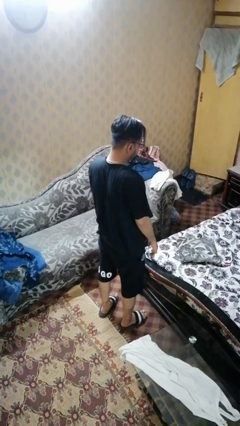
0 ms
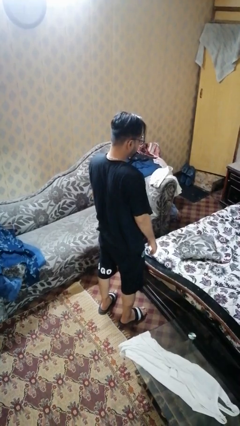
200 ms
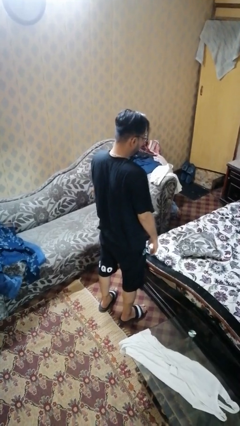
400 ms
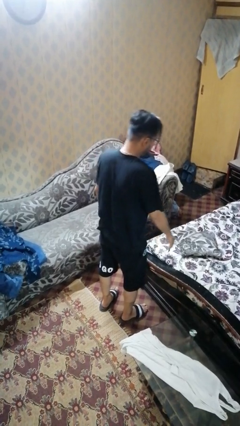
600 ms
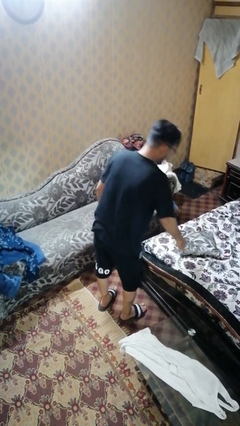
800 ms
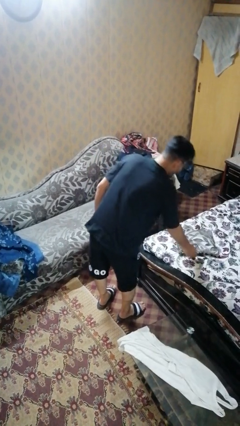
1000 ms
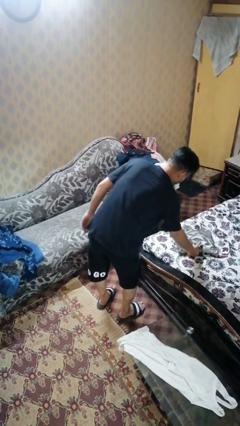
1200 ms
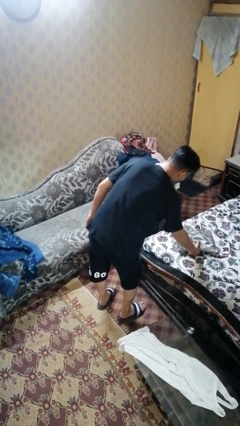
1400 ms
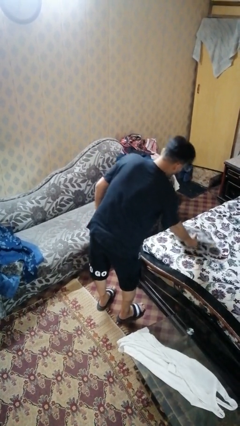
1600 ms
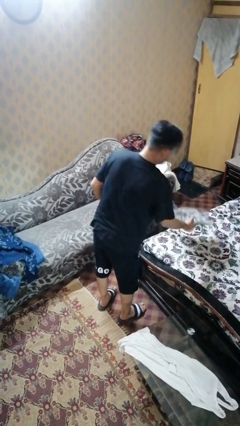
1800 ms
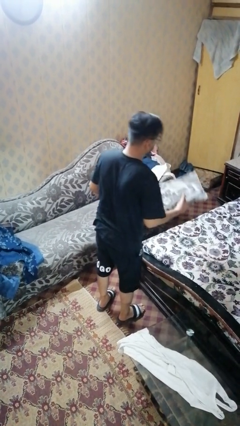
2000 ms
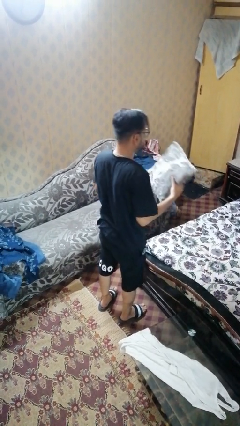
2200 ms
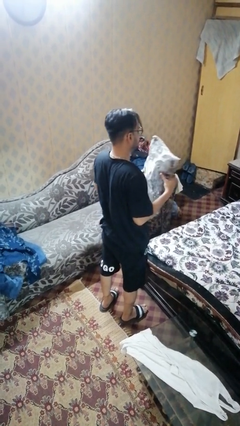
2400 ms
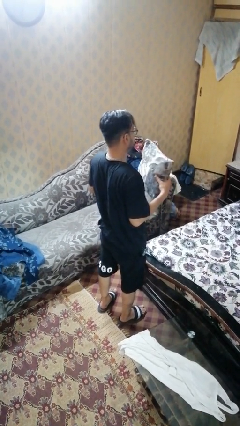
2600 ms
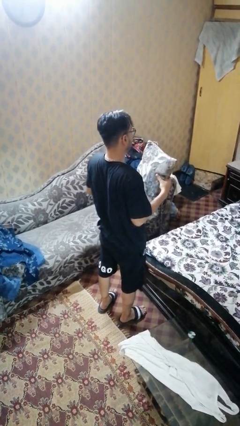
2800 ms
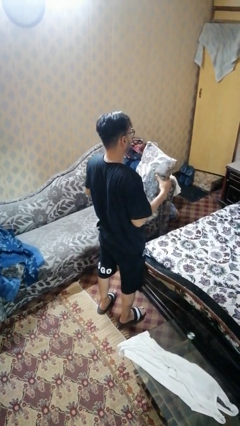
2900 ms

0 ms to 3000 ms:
person picks up object from bed

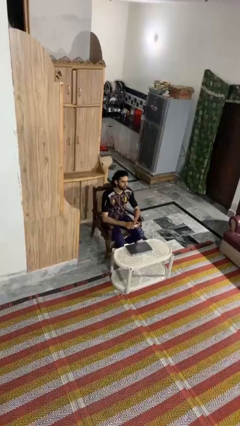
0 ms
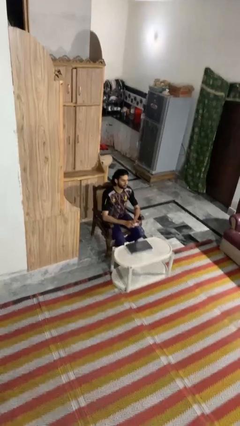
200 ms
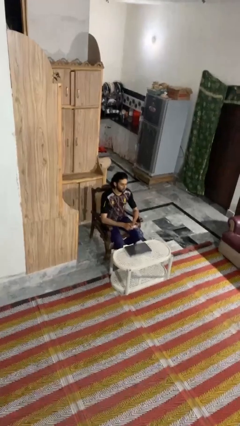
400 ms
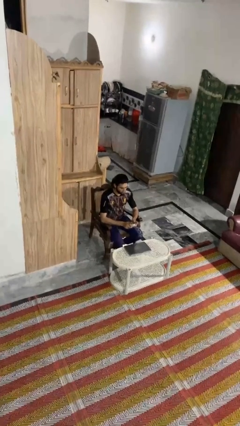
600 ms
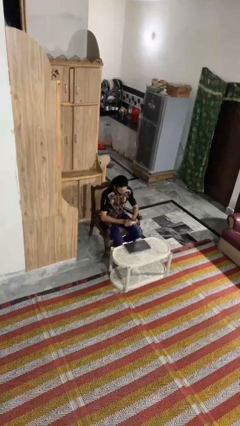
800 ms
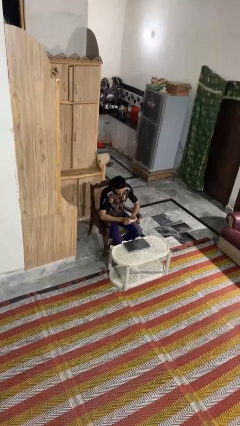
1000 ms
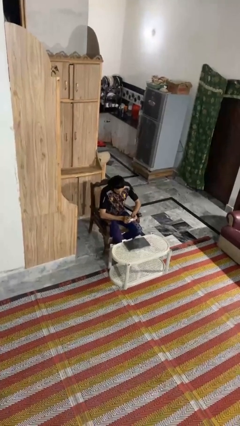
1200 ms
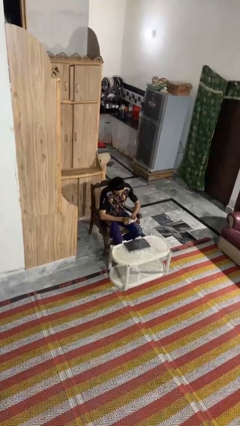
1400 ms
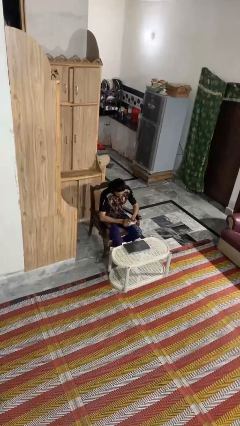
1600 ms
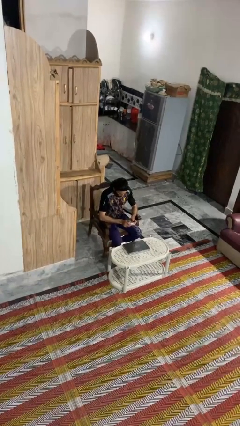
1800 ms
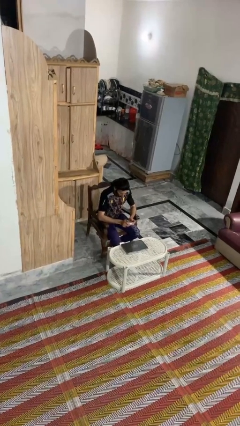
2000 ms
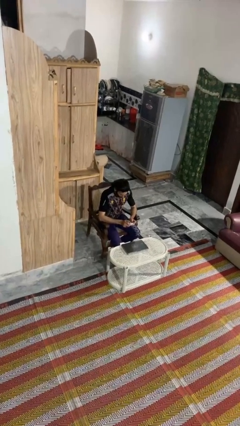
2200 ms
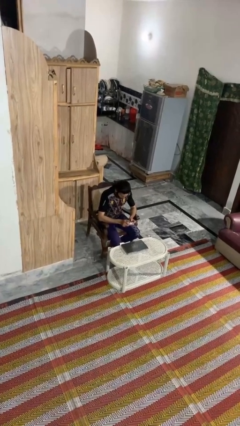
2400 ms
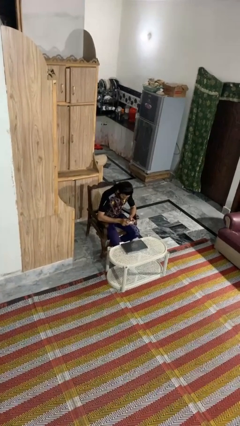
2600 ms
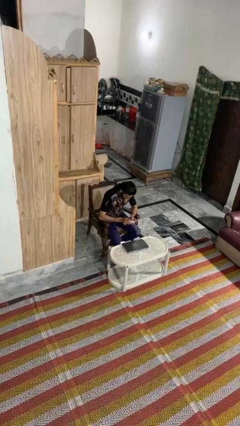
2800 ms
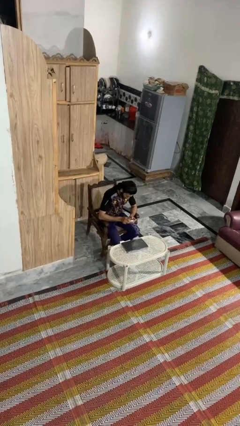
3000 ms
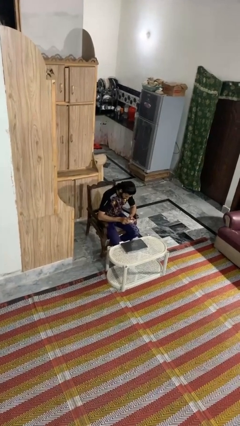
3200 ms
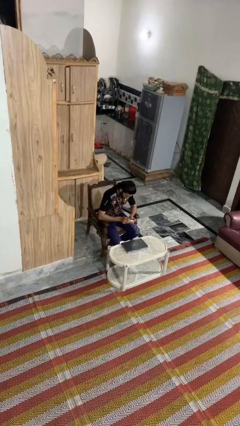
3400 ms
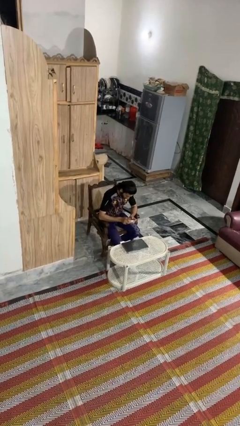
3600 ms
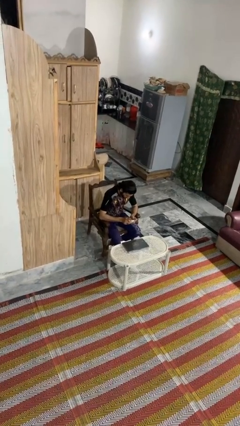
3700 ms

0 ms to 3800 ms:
person interacts with handheld game

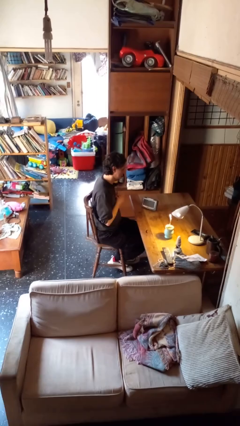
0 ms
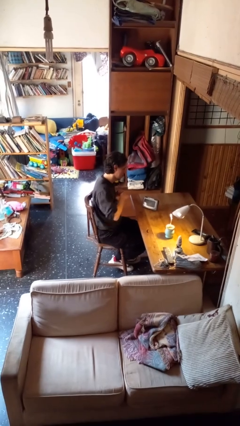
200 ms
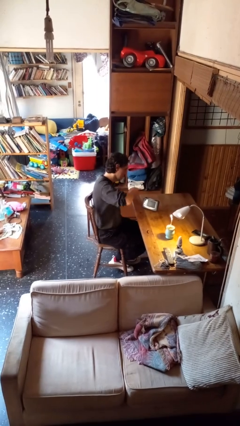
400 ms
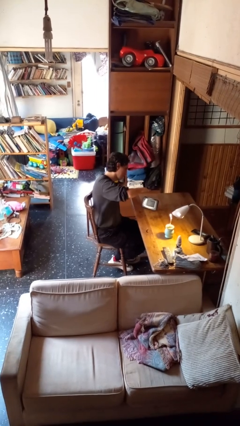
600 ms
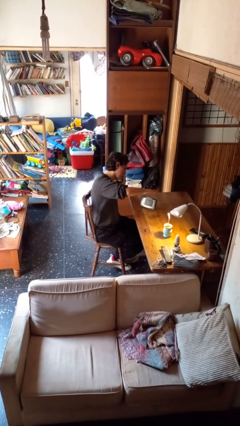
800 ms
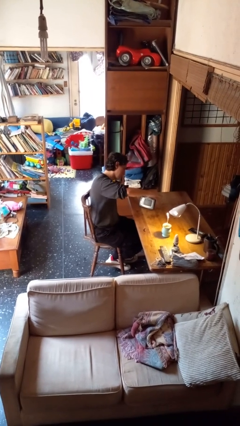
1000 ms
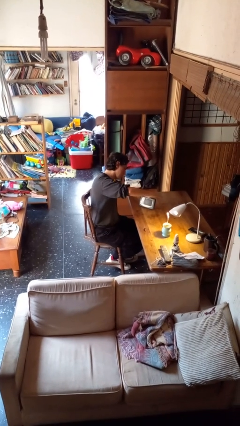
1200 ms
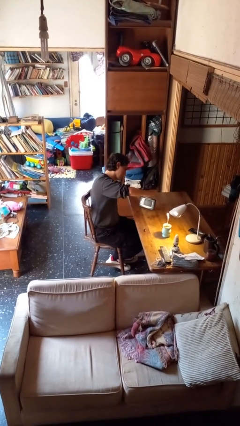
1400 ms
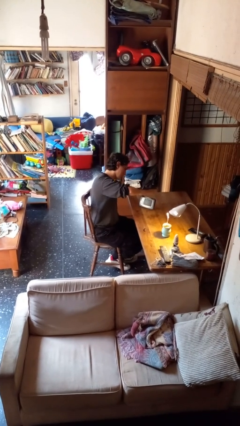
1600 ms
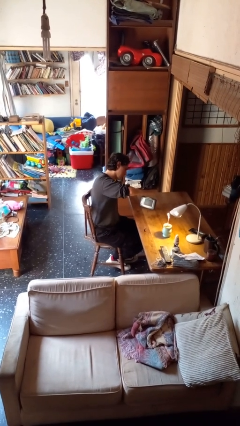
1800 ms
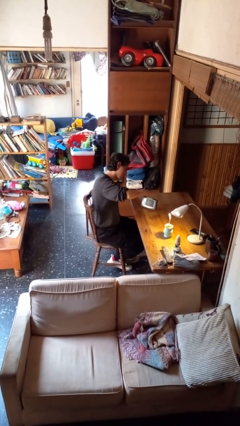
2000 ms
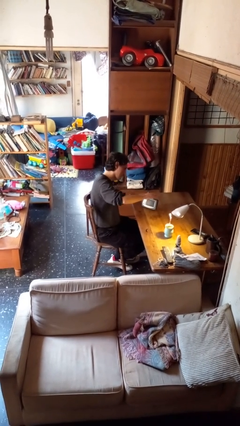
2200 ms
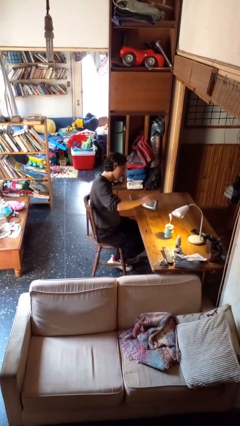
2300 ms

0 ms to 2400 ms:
person waves hand over object

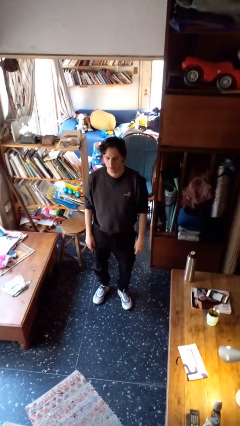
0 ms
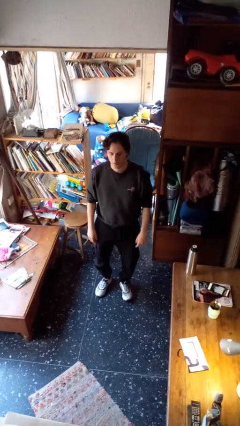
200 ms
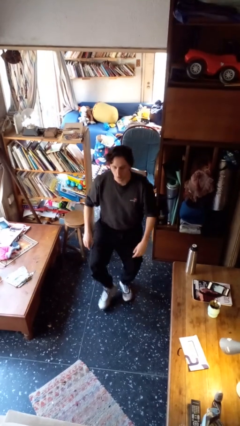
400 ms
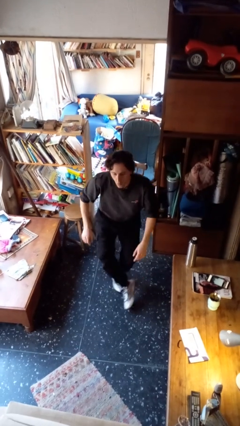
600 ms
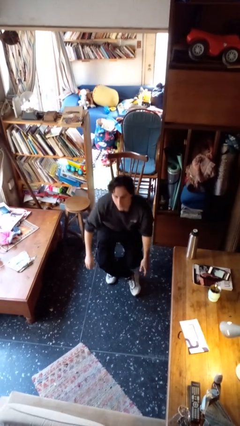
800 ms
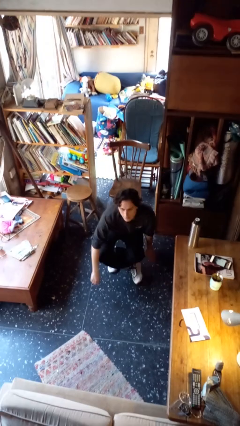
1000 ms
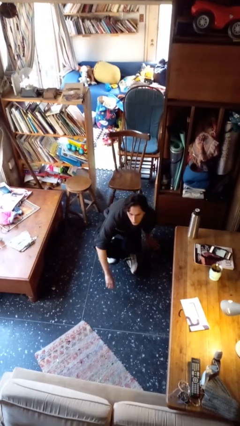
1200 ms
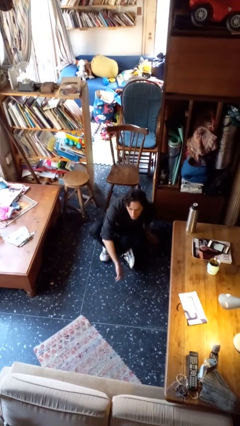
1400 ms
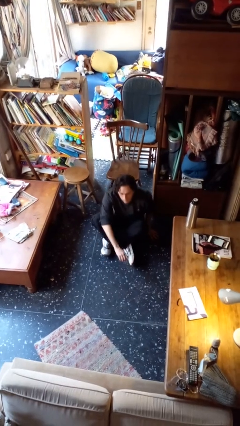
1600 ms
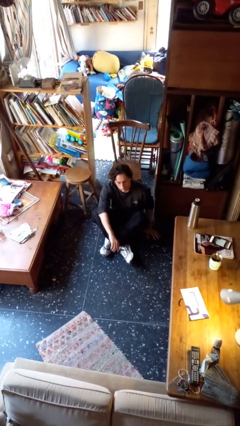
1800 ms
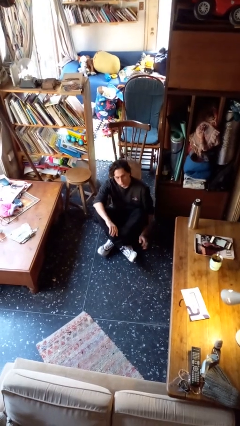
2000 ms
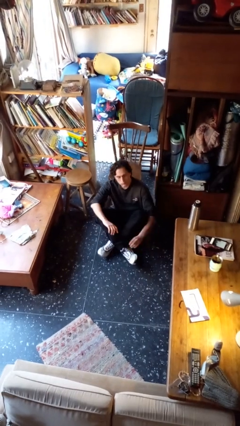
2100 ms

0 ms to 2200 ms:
person sits crisscross

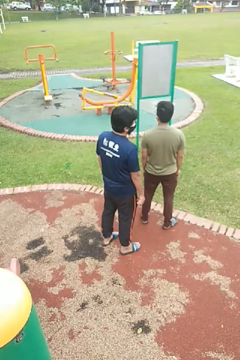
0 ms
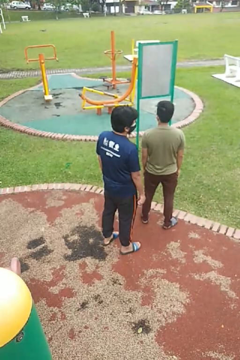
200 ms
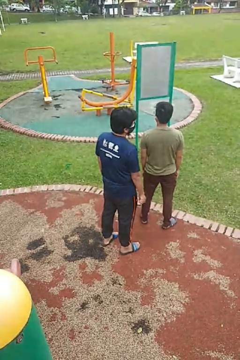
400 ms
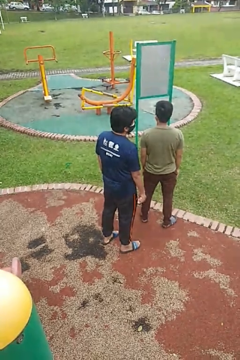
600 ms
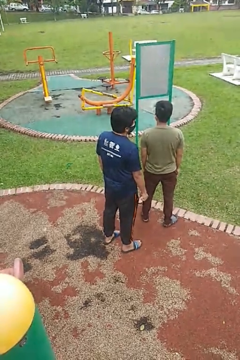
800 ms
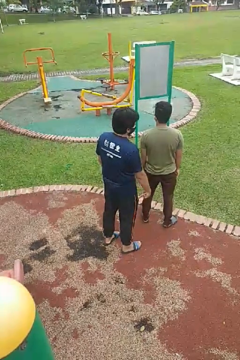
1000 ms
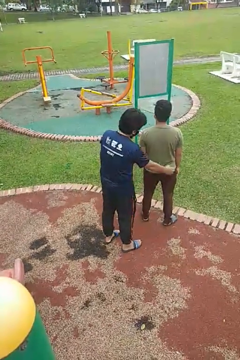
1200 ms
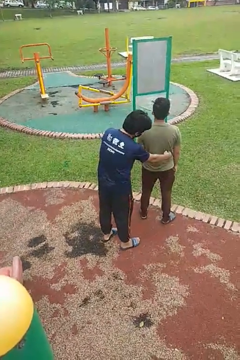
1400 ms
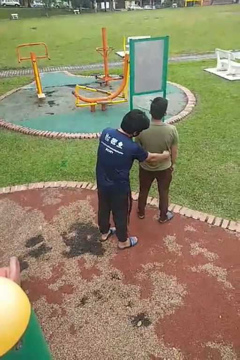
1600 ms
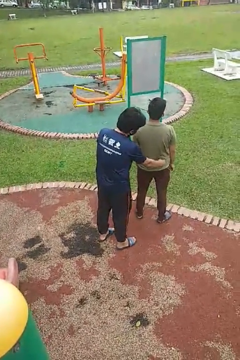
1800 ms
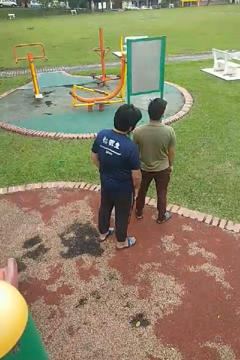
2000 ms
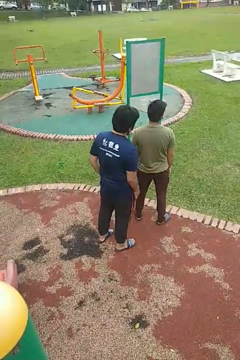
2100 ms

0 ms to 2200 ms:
person tickles person

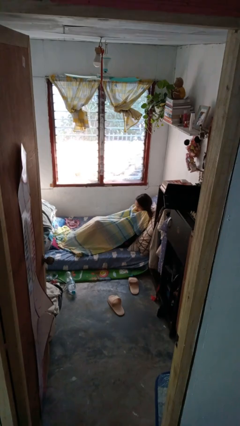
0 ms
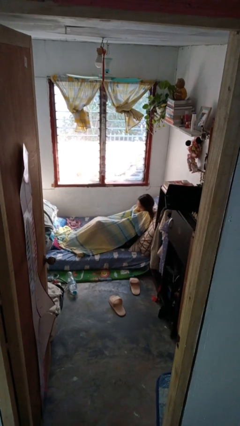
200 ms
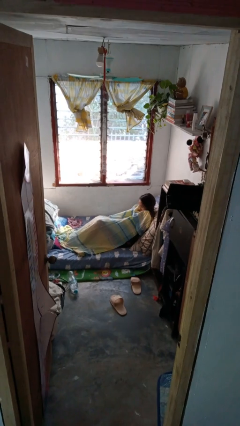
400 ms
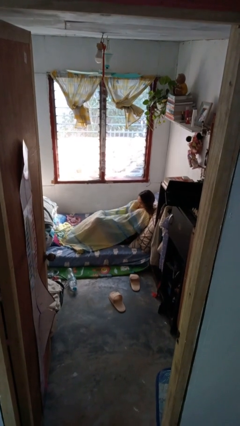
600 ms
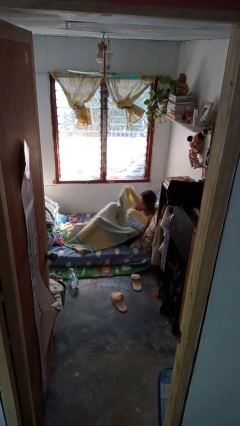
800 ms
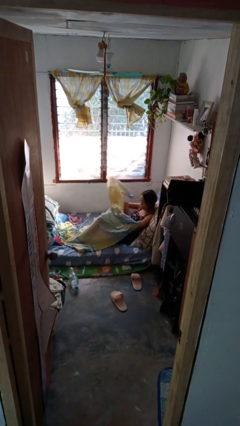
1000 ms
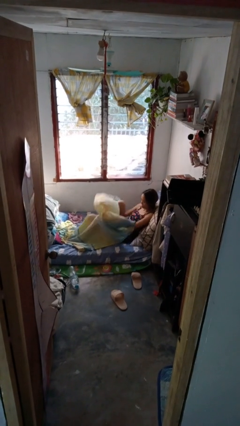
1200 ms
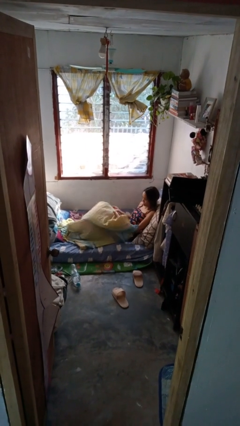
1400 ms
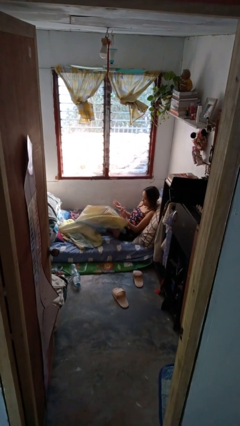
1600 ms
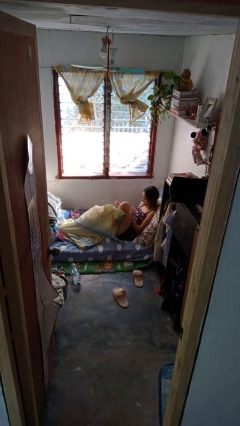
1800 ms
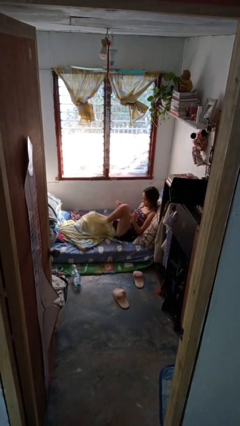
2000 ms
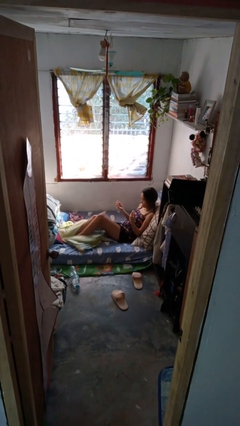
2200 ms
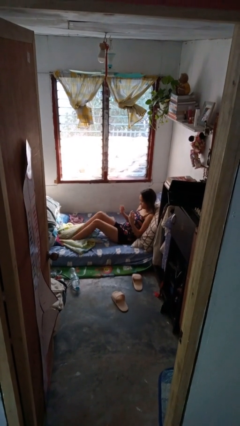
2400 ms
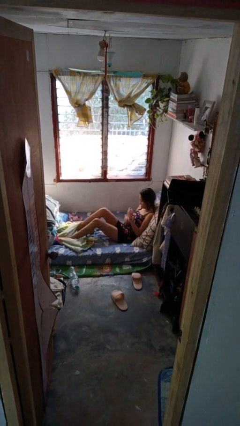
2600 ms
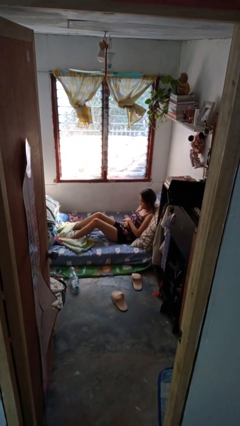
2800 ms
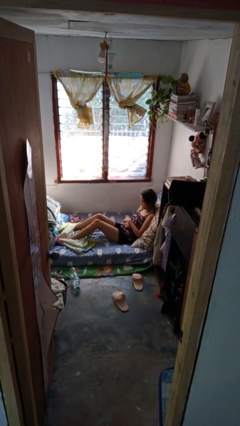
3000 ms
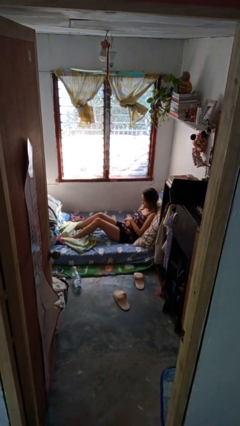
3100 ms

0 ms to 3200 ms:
person uncovers with bedsheets

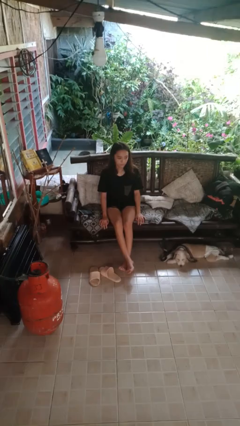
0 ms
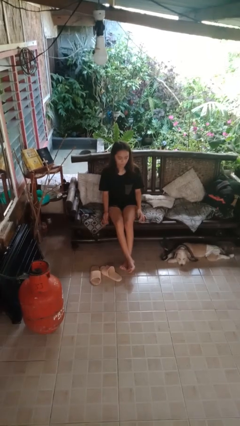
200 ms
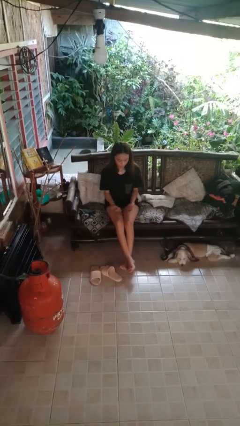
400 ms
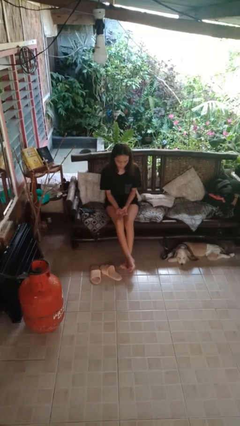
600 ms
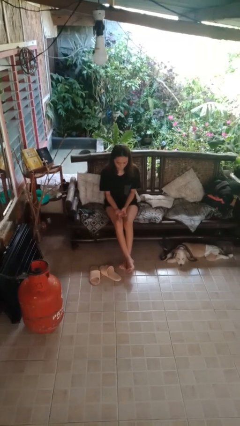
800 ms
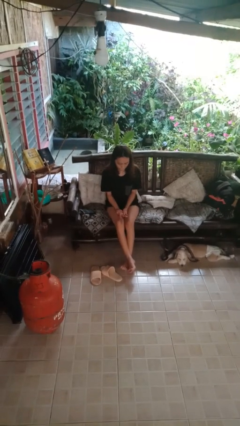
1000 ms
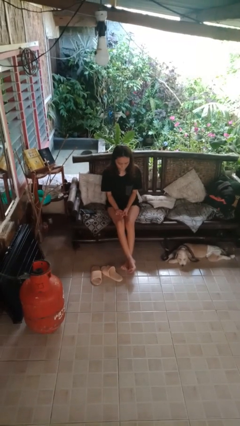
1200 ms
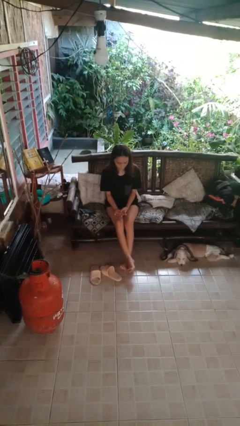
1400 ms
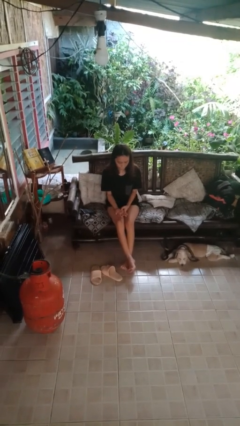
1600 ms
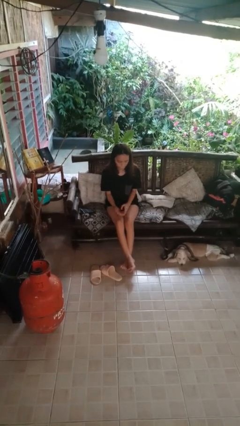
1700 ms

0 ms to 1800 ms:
person looks at hands in lap
